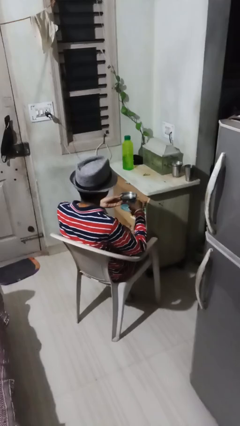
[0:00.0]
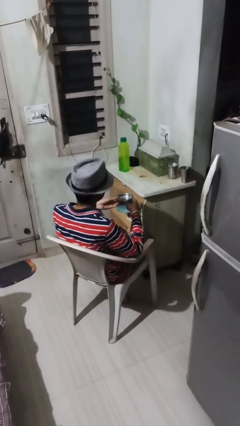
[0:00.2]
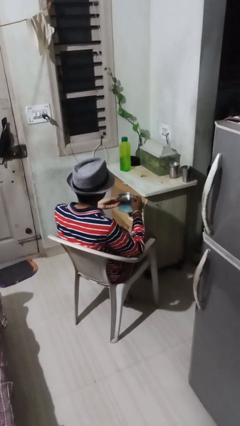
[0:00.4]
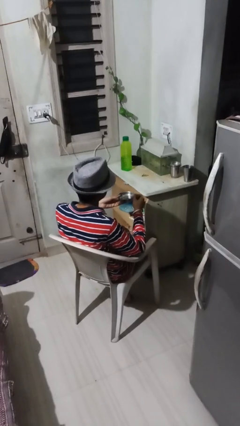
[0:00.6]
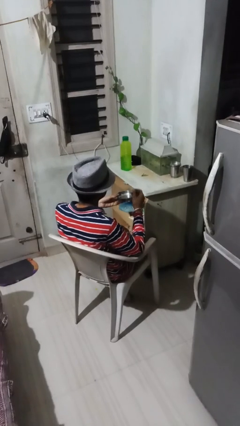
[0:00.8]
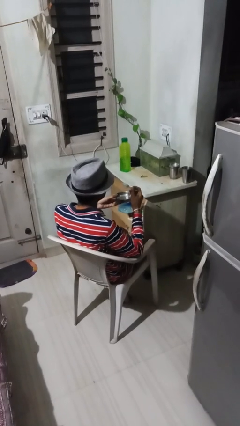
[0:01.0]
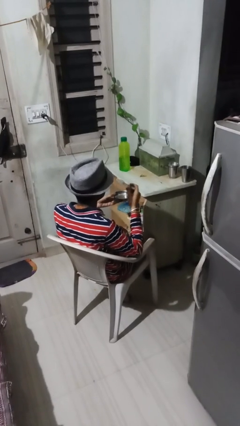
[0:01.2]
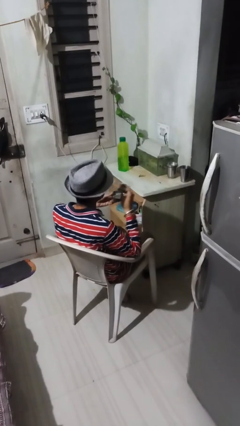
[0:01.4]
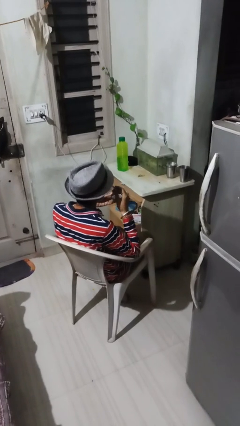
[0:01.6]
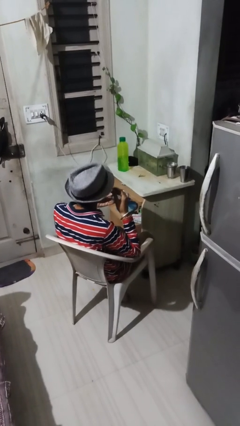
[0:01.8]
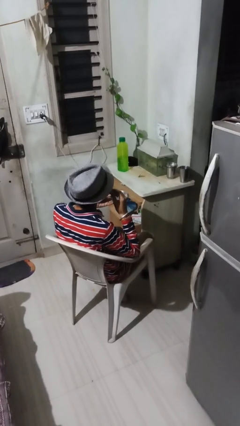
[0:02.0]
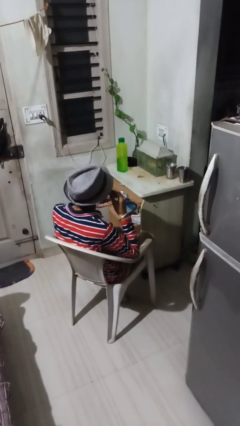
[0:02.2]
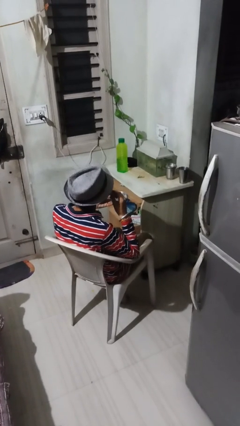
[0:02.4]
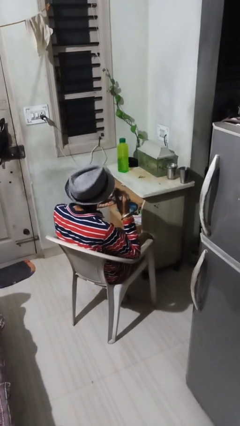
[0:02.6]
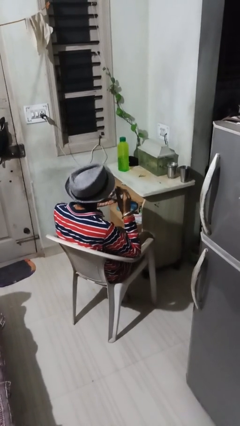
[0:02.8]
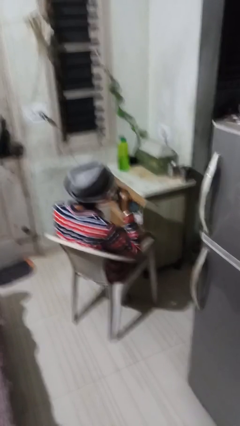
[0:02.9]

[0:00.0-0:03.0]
person eats with utensil

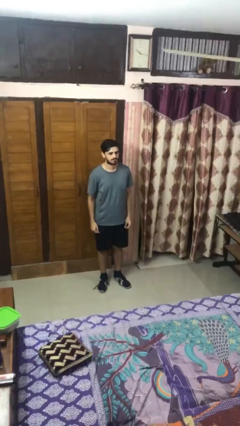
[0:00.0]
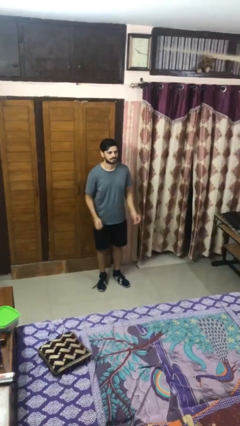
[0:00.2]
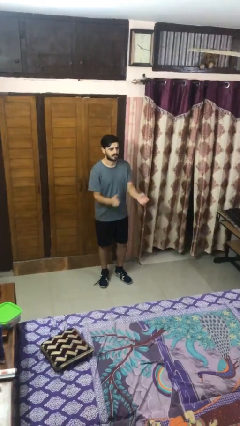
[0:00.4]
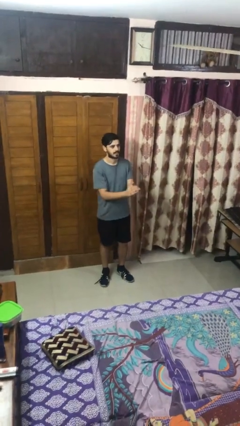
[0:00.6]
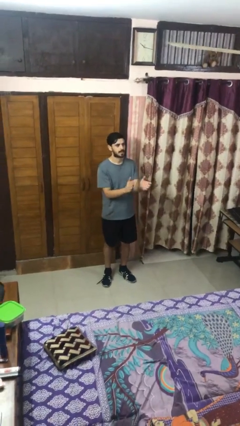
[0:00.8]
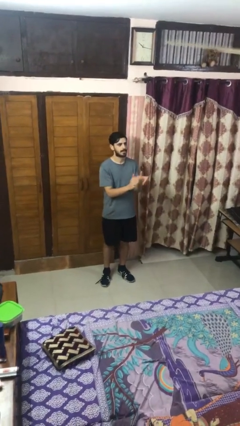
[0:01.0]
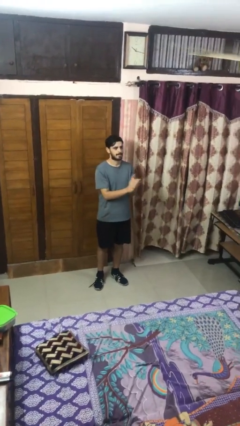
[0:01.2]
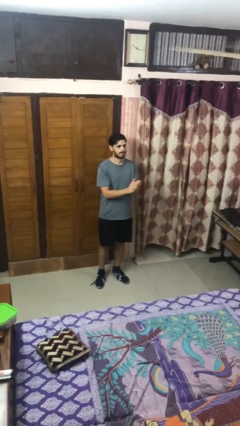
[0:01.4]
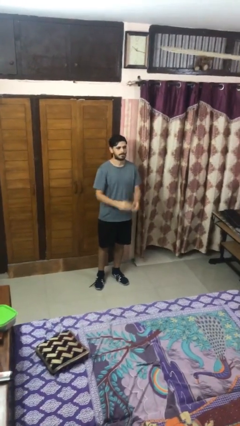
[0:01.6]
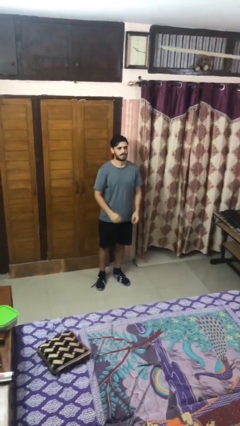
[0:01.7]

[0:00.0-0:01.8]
person claps hands

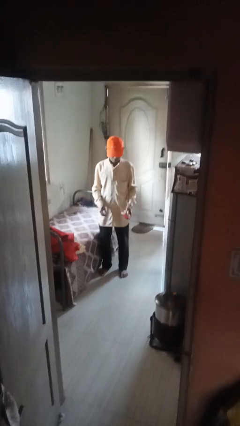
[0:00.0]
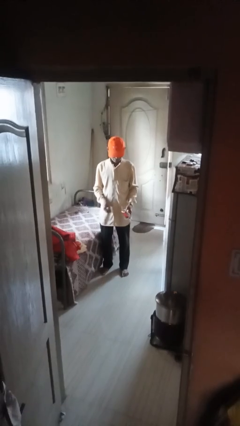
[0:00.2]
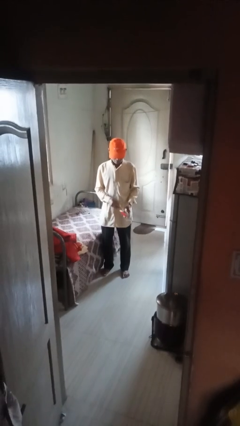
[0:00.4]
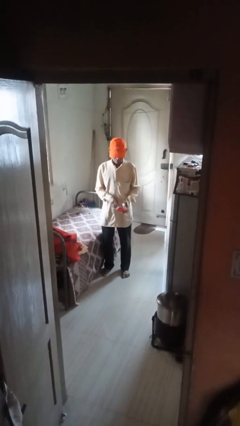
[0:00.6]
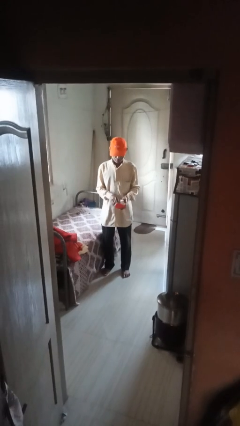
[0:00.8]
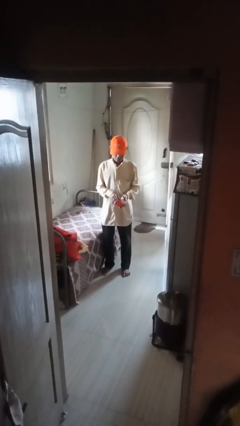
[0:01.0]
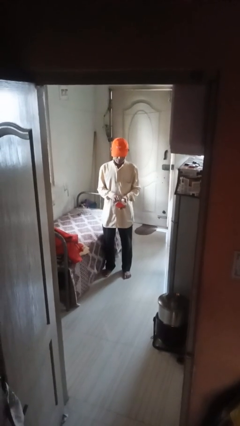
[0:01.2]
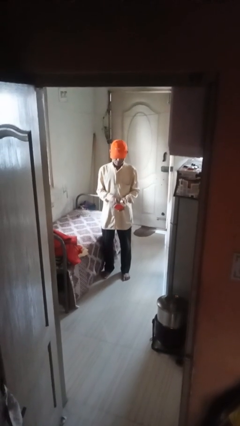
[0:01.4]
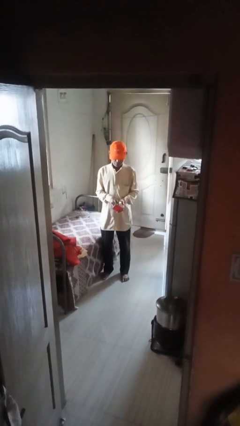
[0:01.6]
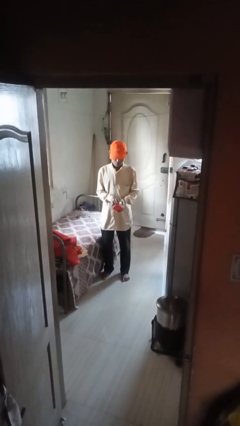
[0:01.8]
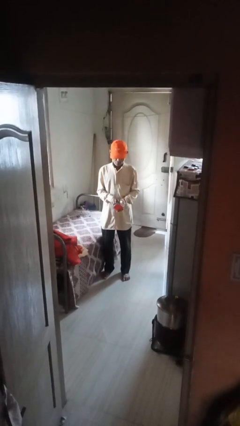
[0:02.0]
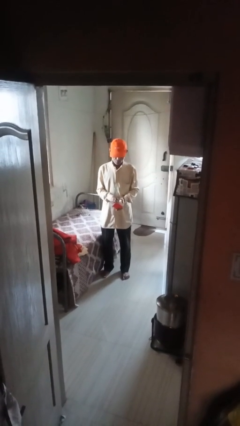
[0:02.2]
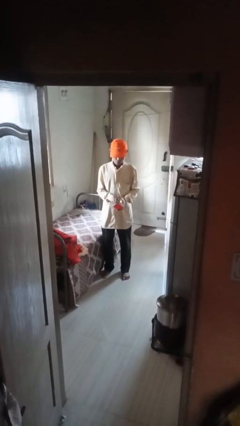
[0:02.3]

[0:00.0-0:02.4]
person searches in purse

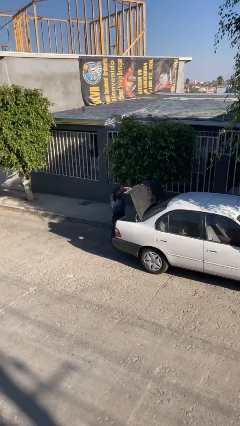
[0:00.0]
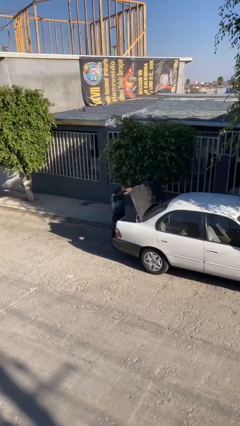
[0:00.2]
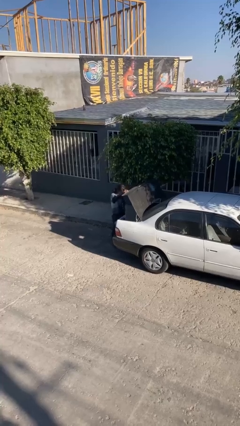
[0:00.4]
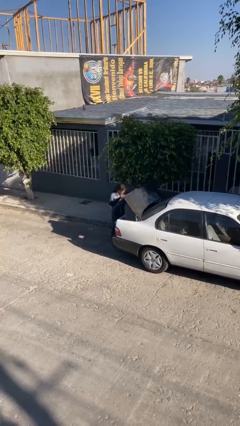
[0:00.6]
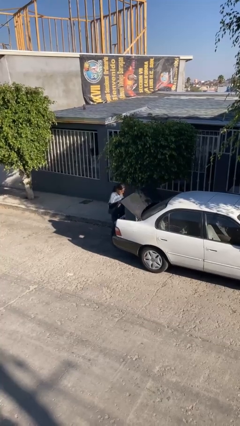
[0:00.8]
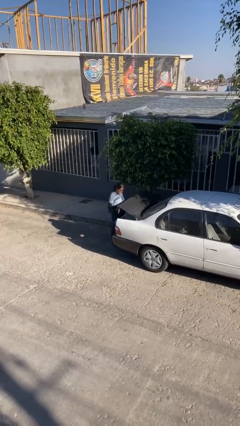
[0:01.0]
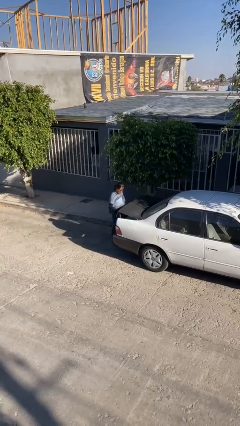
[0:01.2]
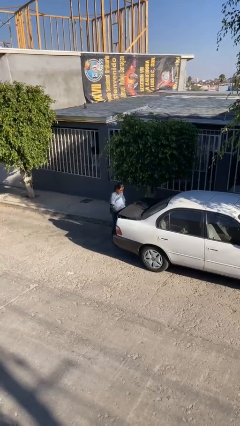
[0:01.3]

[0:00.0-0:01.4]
person closes car trunk

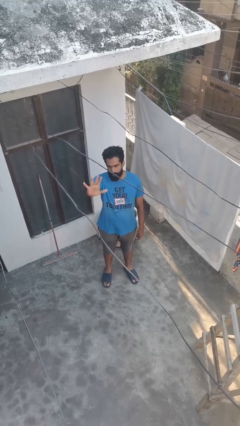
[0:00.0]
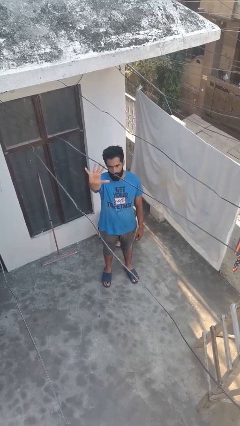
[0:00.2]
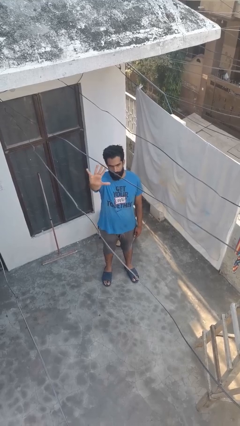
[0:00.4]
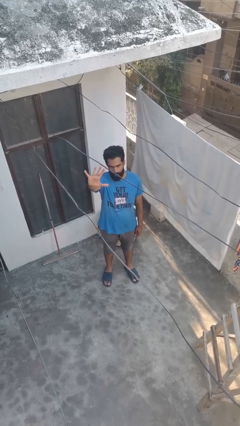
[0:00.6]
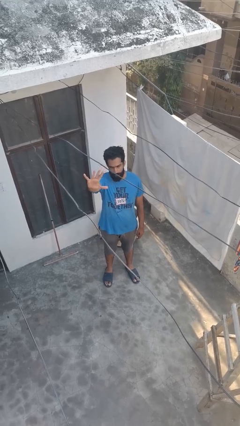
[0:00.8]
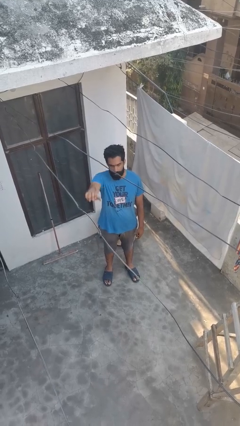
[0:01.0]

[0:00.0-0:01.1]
person gestures number five

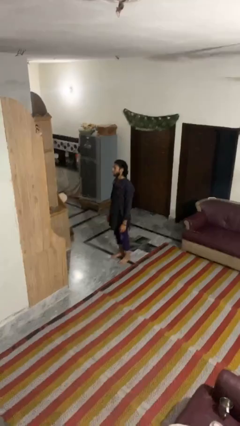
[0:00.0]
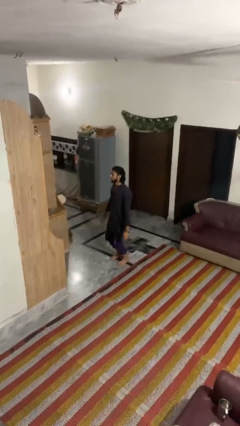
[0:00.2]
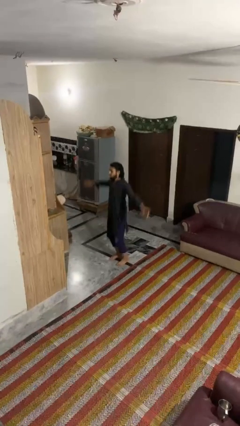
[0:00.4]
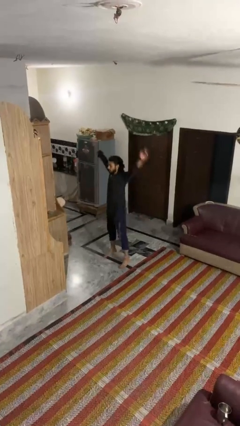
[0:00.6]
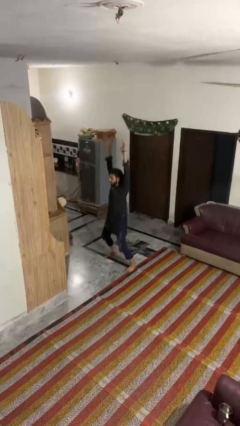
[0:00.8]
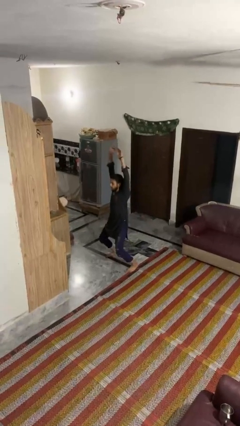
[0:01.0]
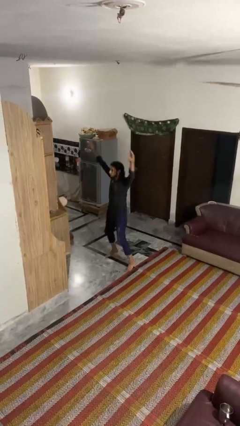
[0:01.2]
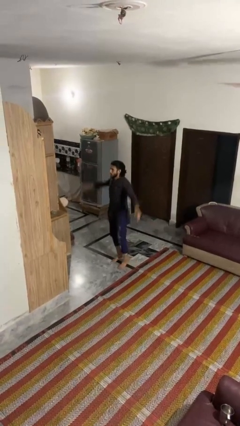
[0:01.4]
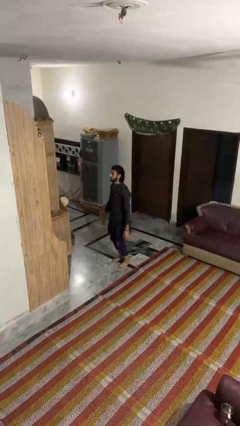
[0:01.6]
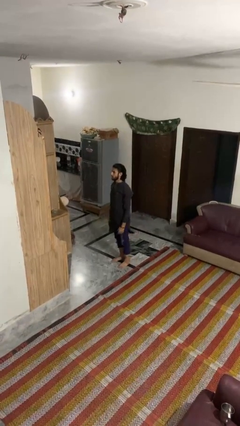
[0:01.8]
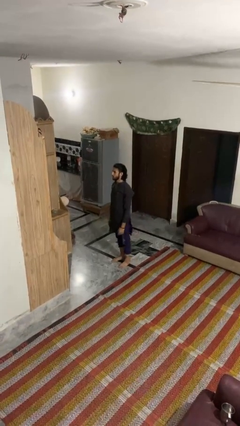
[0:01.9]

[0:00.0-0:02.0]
person exercises with jumping jacks

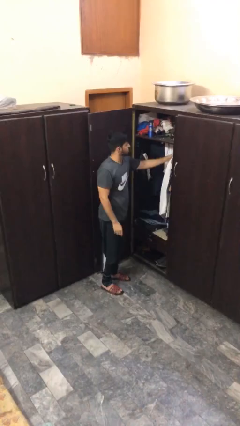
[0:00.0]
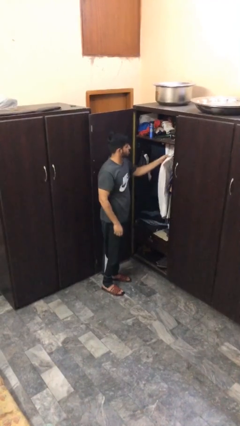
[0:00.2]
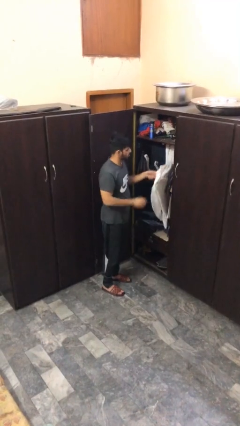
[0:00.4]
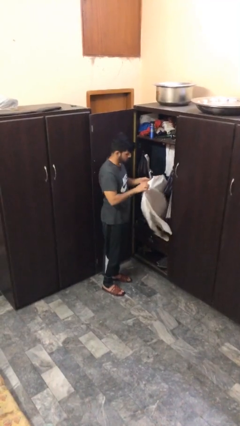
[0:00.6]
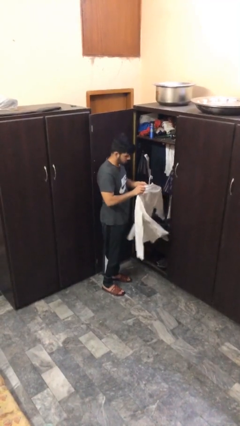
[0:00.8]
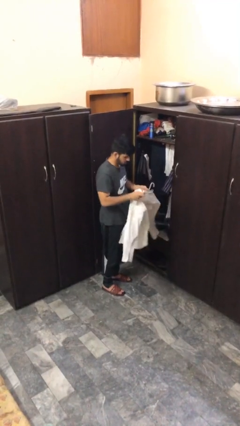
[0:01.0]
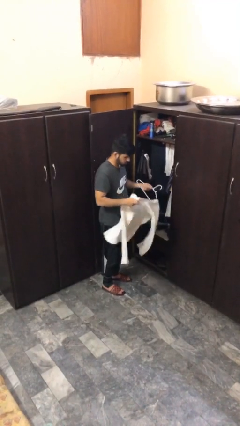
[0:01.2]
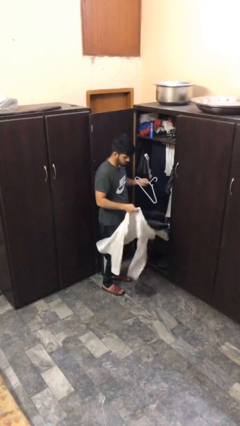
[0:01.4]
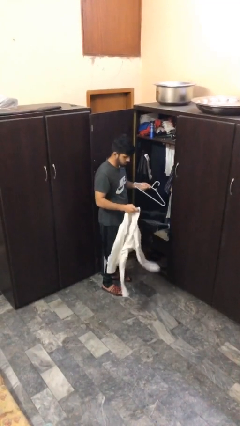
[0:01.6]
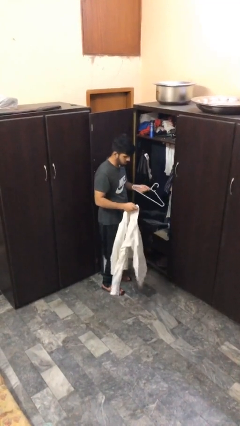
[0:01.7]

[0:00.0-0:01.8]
person takes clothes from closet

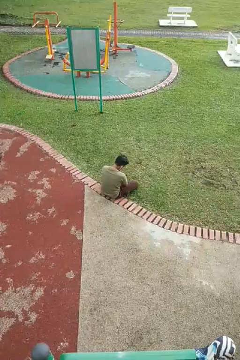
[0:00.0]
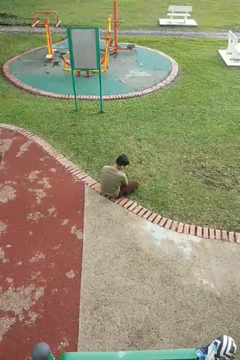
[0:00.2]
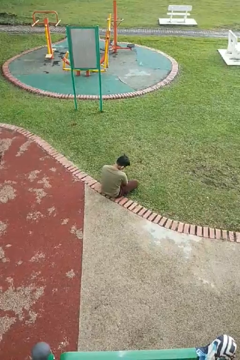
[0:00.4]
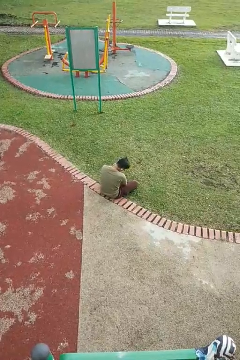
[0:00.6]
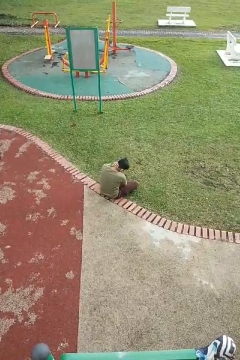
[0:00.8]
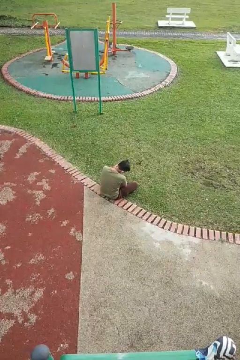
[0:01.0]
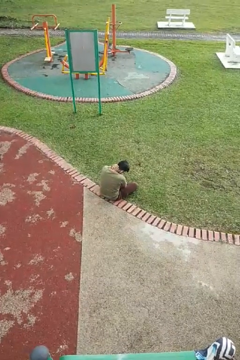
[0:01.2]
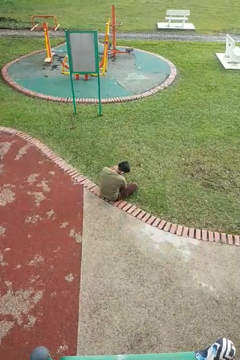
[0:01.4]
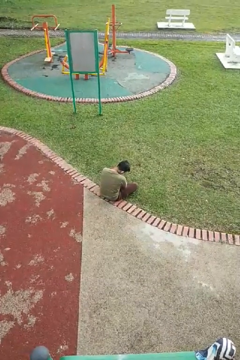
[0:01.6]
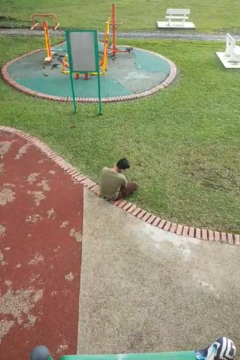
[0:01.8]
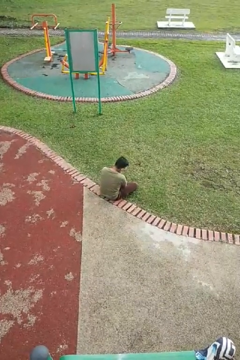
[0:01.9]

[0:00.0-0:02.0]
person rubs neck

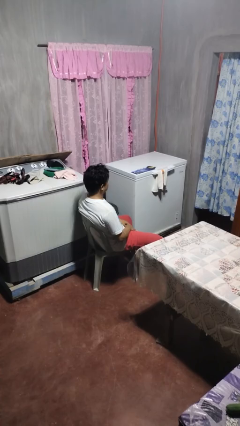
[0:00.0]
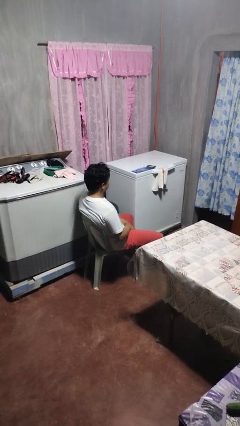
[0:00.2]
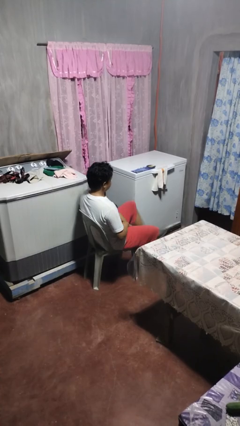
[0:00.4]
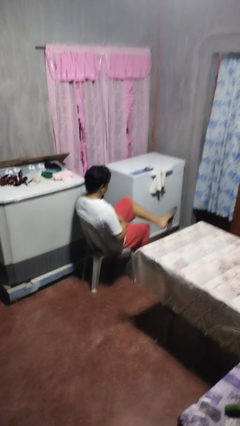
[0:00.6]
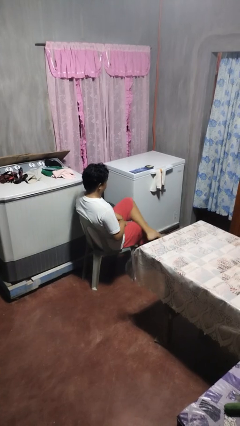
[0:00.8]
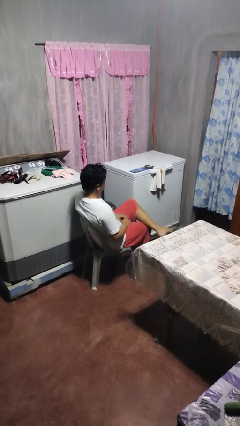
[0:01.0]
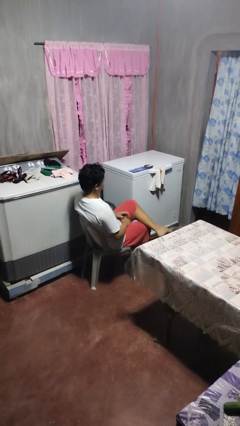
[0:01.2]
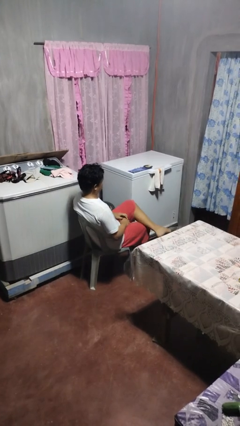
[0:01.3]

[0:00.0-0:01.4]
person crosses legs

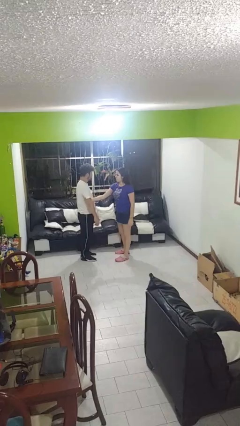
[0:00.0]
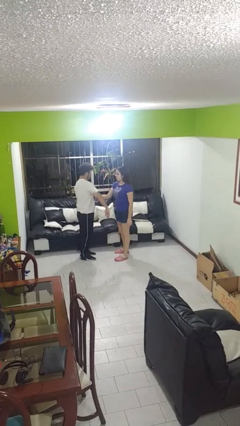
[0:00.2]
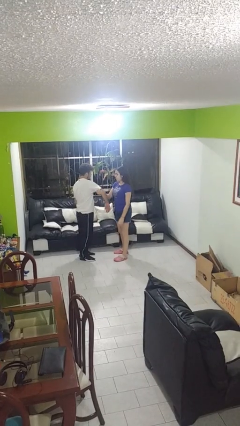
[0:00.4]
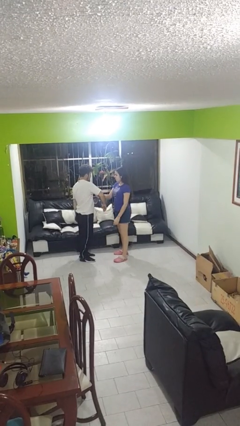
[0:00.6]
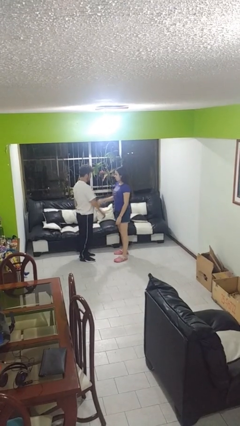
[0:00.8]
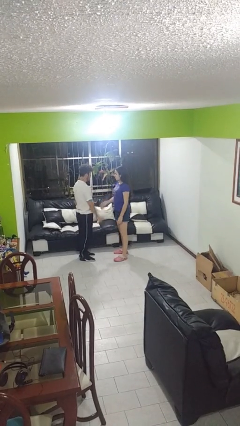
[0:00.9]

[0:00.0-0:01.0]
person grabs person by bicep
